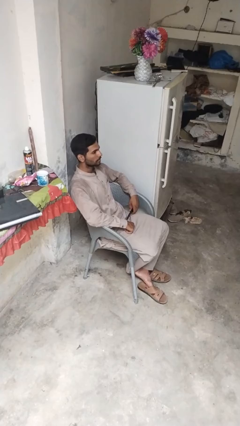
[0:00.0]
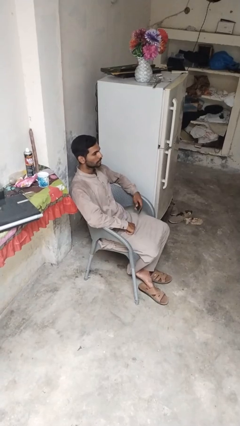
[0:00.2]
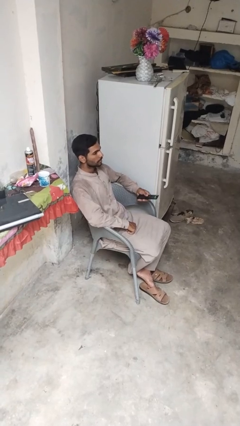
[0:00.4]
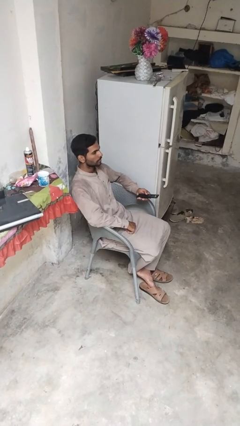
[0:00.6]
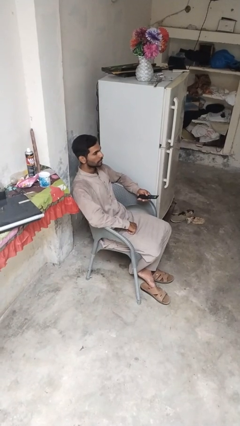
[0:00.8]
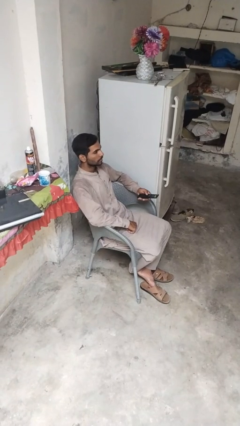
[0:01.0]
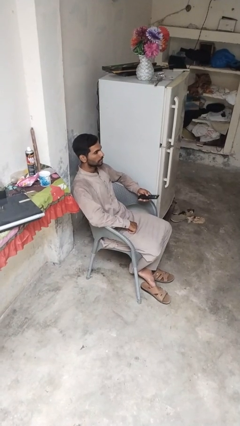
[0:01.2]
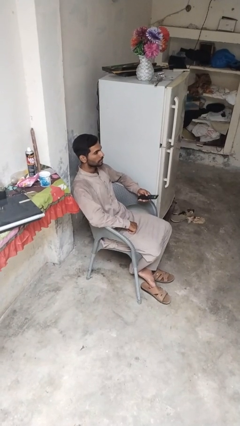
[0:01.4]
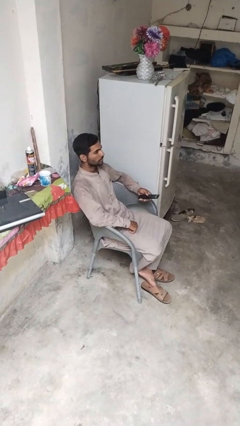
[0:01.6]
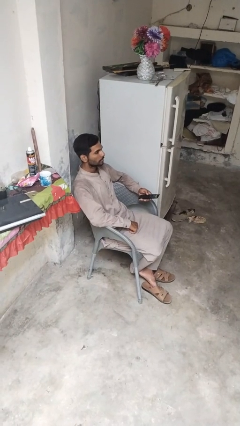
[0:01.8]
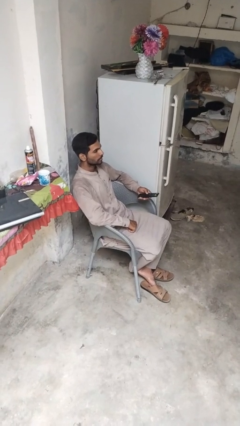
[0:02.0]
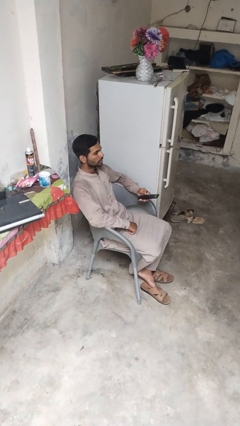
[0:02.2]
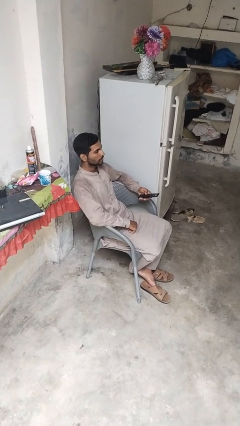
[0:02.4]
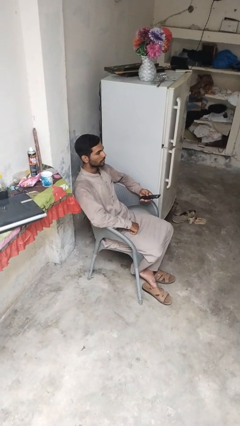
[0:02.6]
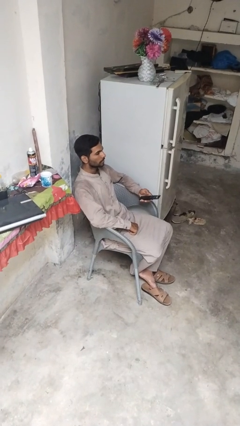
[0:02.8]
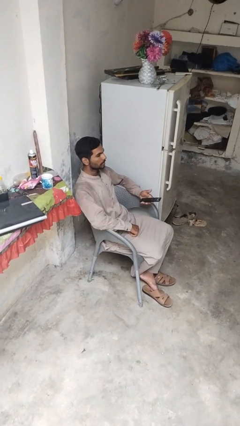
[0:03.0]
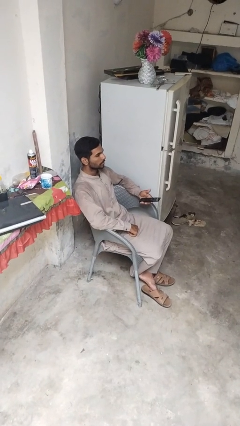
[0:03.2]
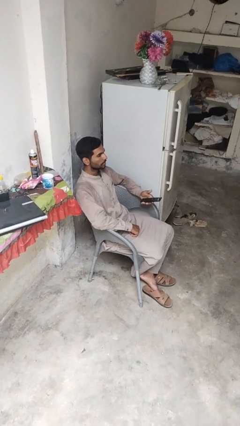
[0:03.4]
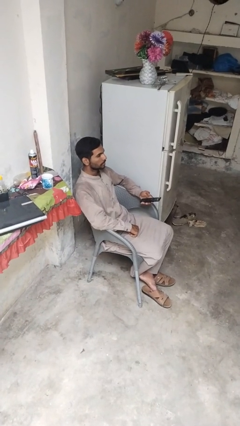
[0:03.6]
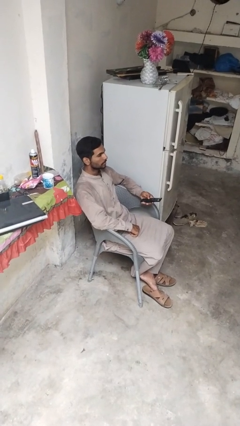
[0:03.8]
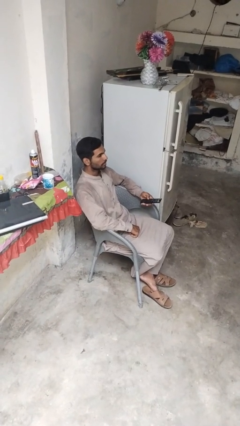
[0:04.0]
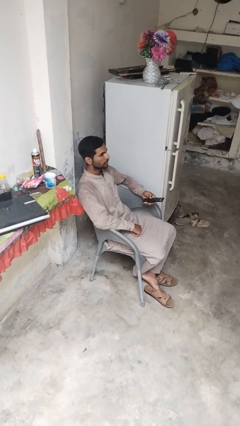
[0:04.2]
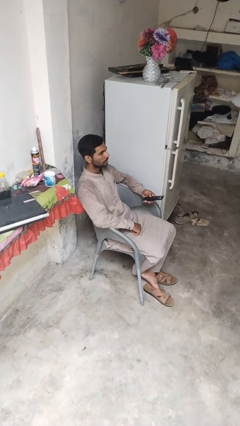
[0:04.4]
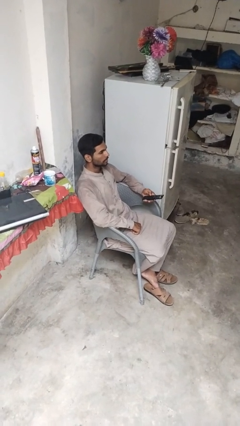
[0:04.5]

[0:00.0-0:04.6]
person uses television remote

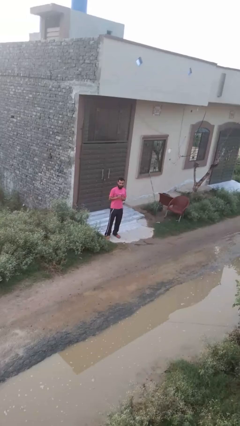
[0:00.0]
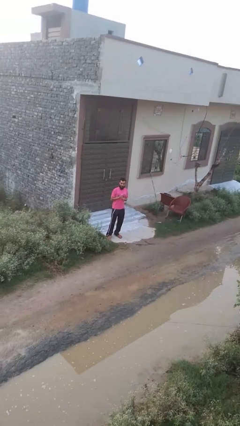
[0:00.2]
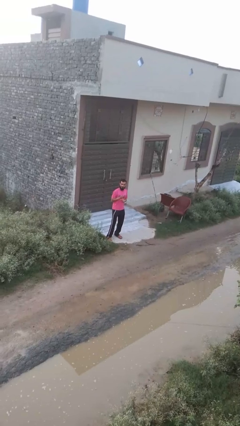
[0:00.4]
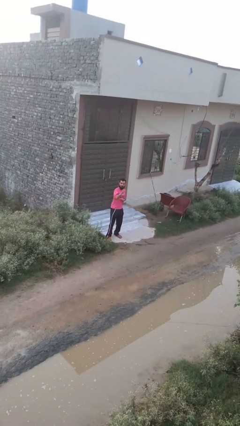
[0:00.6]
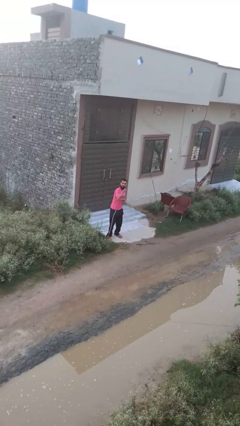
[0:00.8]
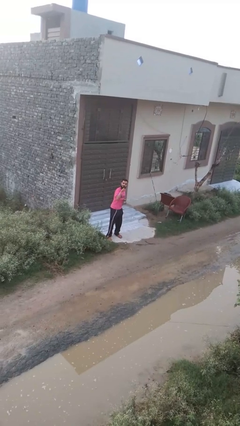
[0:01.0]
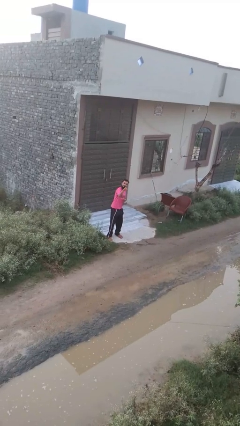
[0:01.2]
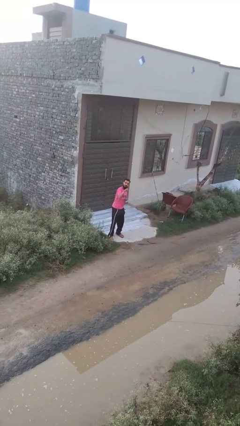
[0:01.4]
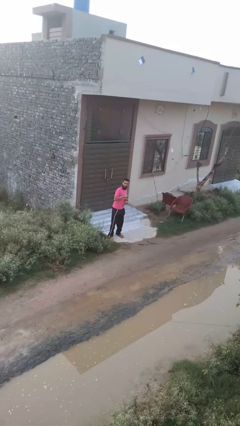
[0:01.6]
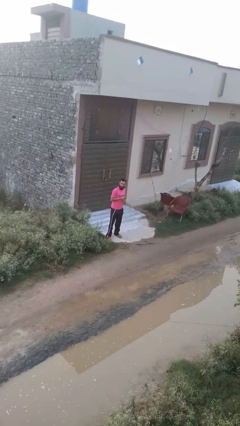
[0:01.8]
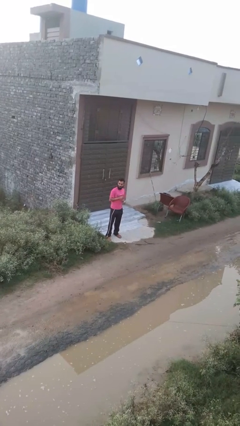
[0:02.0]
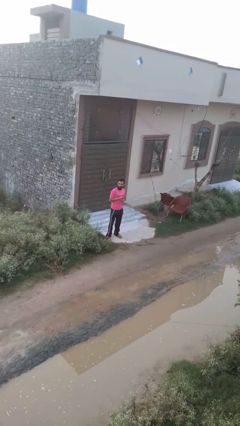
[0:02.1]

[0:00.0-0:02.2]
person punches

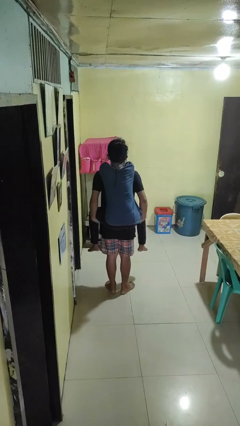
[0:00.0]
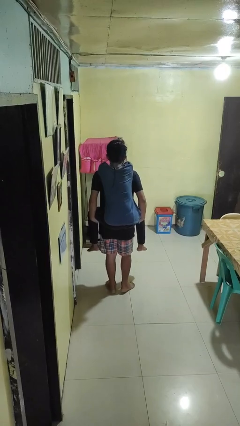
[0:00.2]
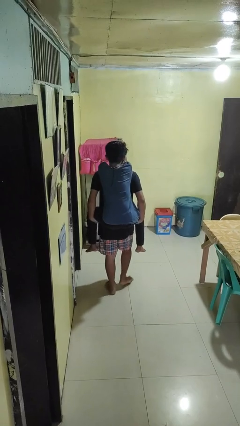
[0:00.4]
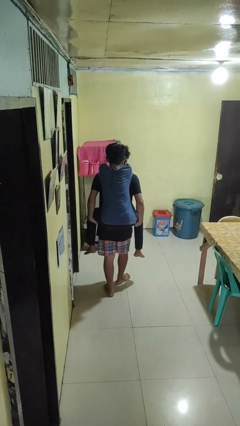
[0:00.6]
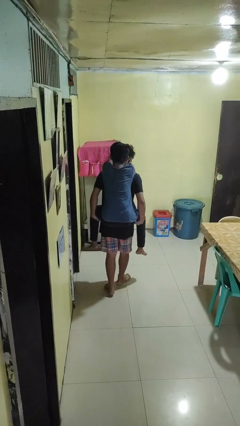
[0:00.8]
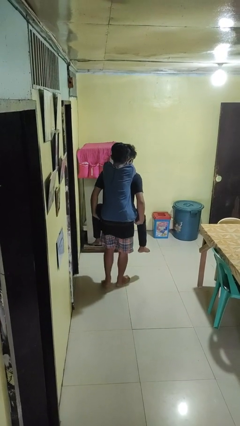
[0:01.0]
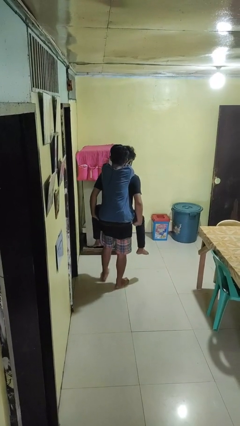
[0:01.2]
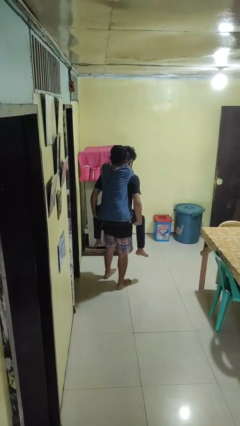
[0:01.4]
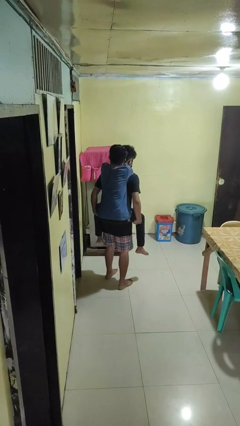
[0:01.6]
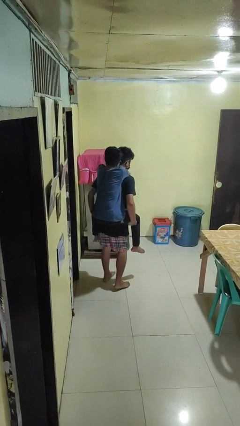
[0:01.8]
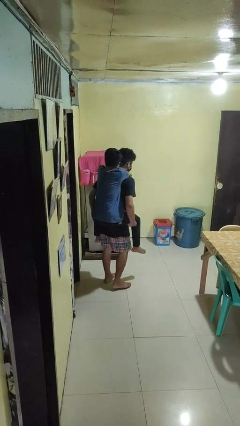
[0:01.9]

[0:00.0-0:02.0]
person carries person on back

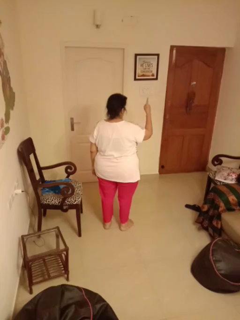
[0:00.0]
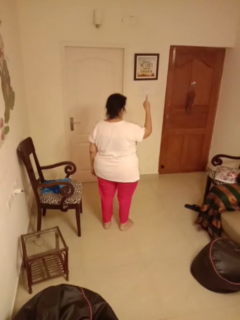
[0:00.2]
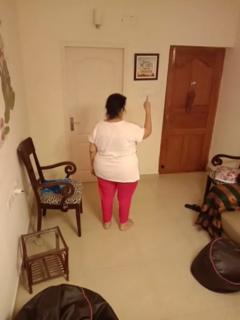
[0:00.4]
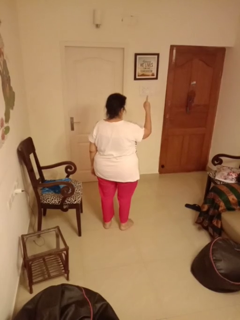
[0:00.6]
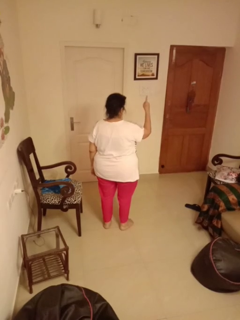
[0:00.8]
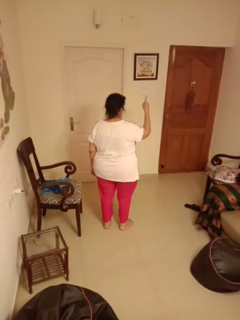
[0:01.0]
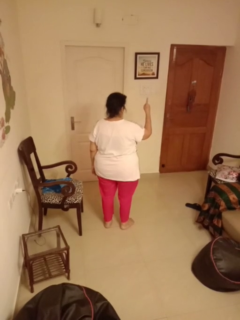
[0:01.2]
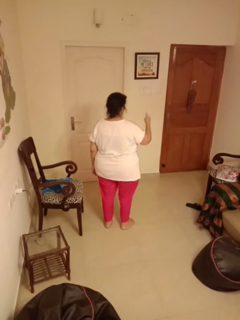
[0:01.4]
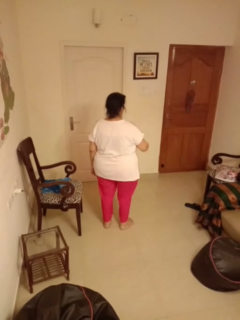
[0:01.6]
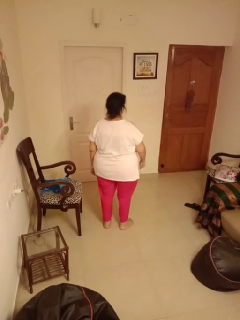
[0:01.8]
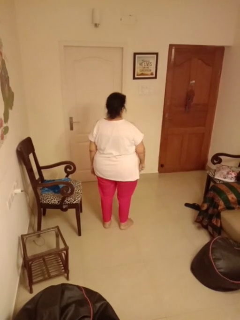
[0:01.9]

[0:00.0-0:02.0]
person gestures number one

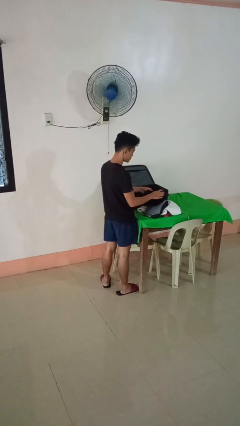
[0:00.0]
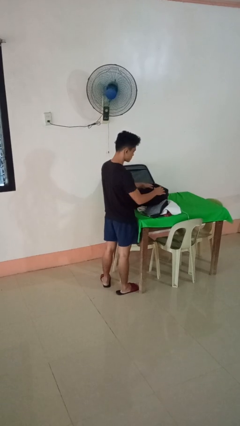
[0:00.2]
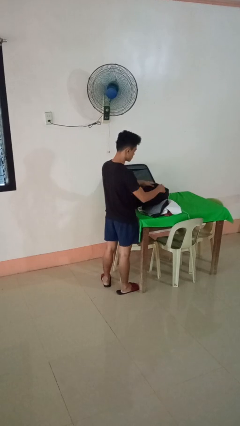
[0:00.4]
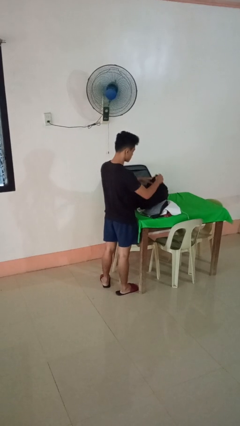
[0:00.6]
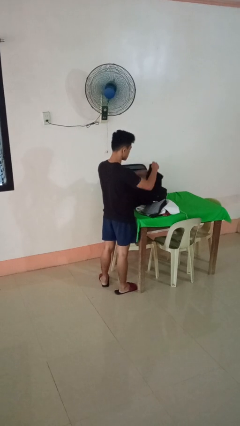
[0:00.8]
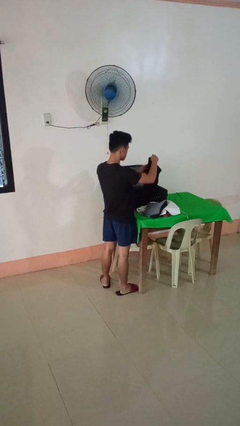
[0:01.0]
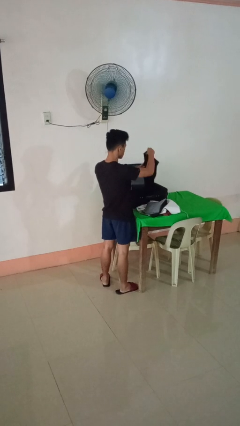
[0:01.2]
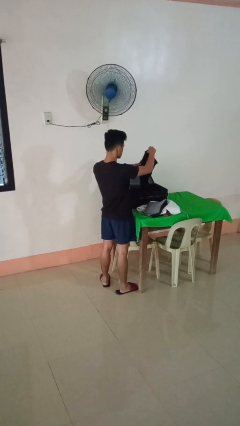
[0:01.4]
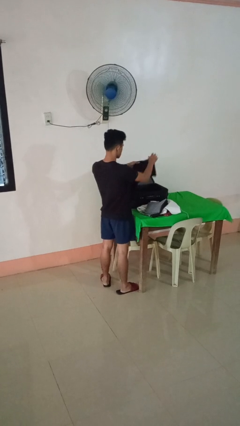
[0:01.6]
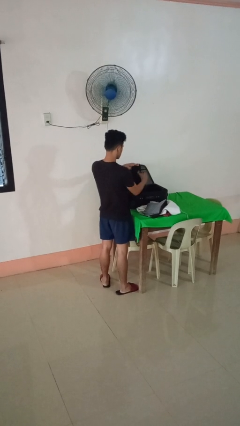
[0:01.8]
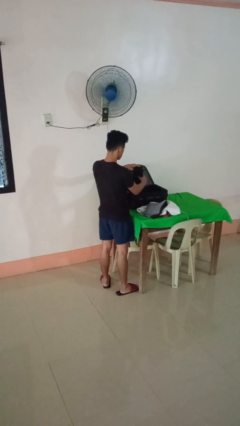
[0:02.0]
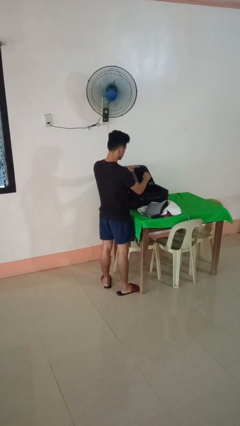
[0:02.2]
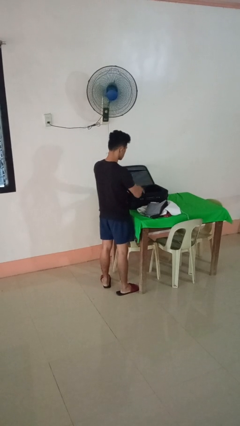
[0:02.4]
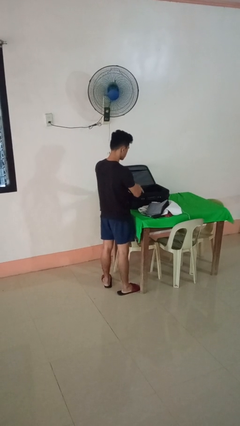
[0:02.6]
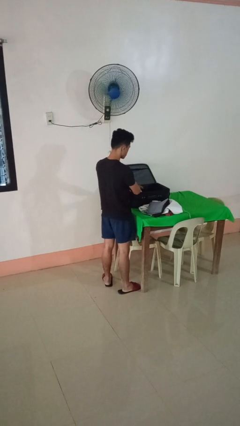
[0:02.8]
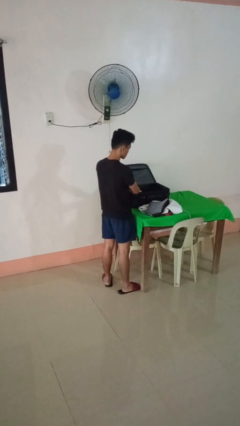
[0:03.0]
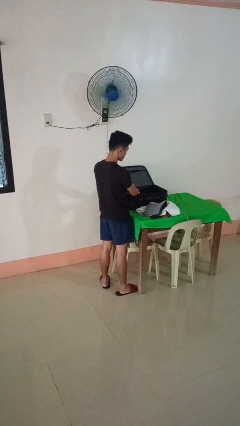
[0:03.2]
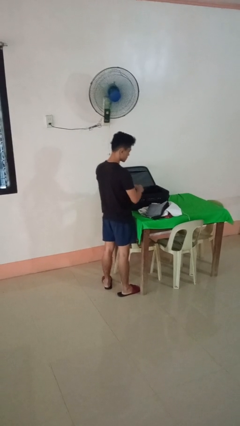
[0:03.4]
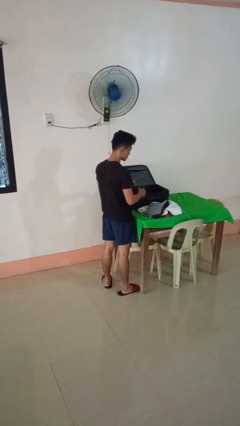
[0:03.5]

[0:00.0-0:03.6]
person loads clothes into suitcase

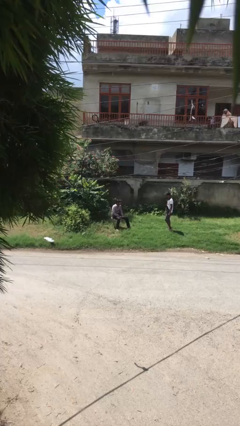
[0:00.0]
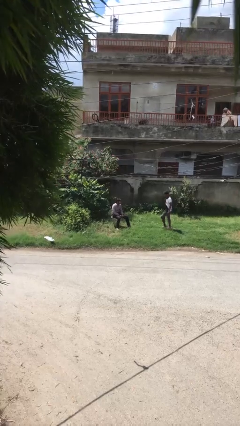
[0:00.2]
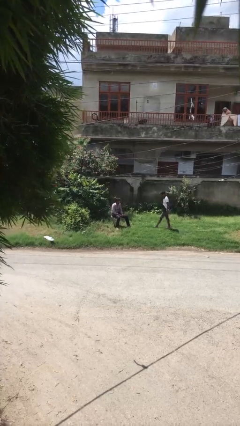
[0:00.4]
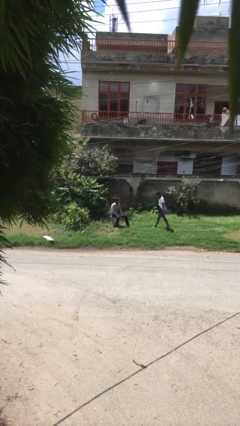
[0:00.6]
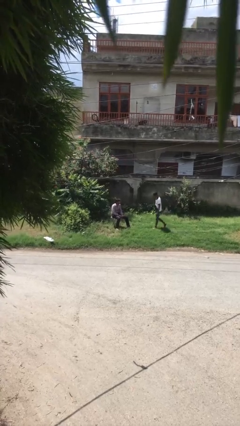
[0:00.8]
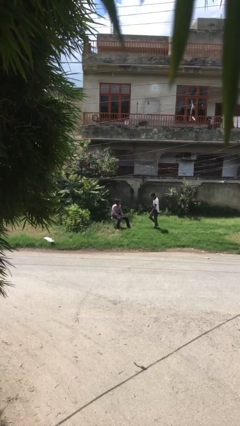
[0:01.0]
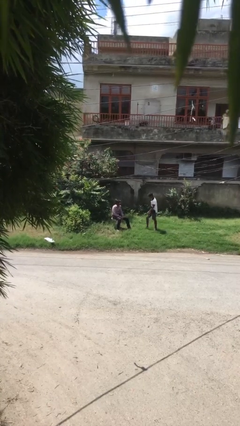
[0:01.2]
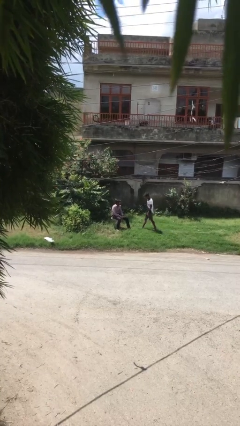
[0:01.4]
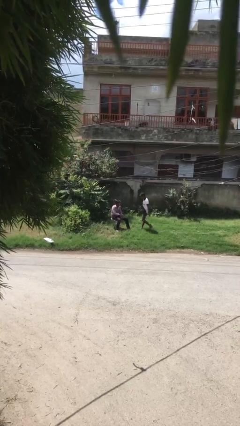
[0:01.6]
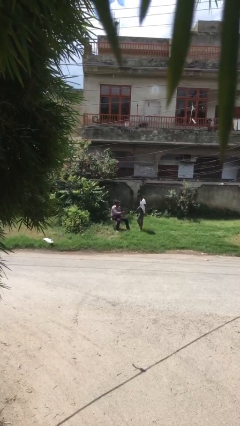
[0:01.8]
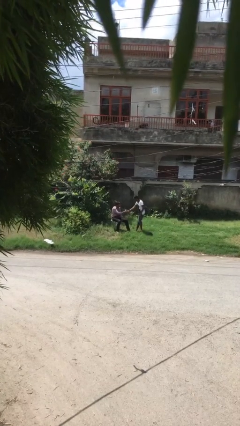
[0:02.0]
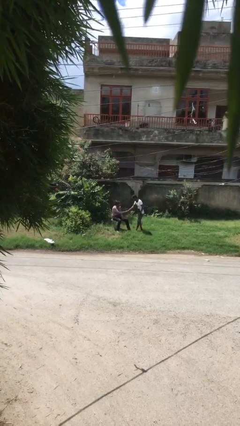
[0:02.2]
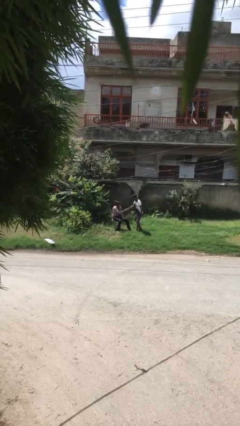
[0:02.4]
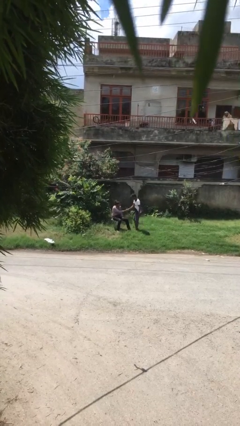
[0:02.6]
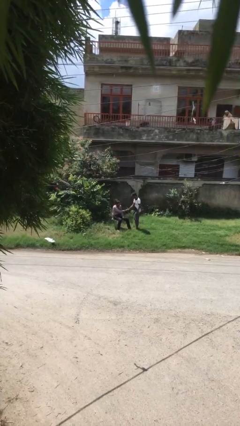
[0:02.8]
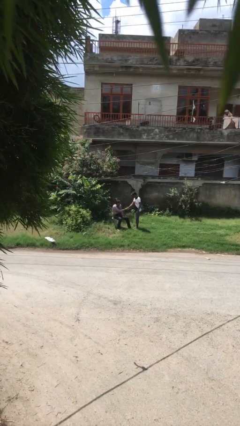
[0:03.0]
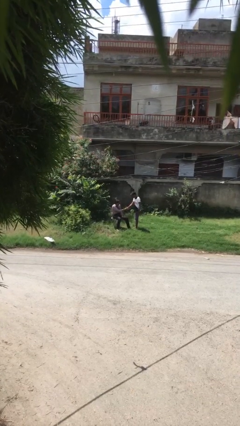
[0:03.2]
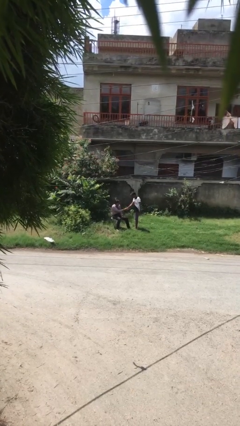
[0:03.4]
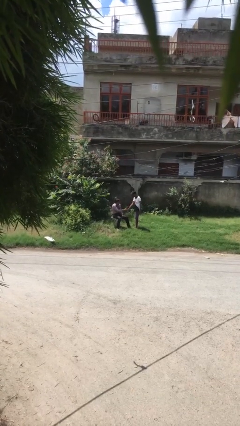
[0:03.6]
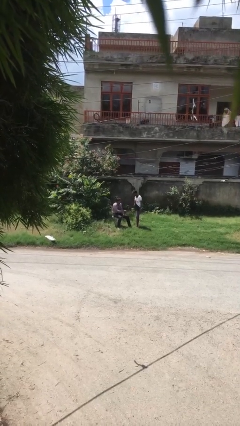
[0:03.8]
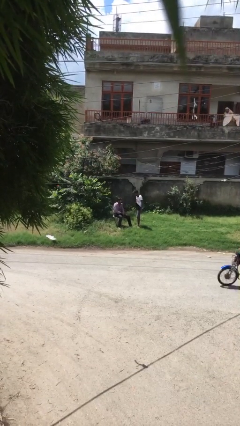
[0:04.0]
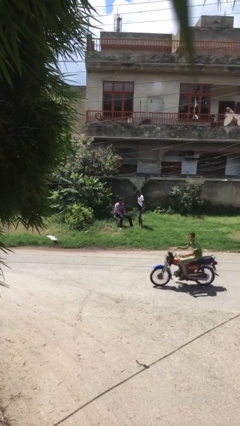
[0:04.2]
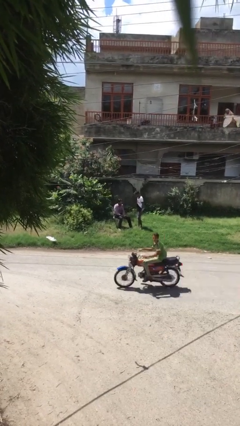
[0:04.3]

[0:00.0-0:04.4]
person shakes hand
